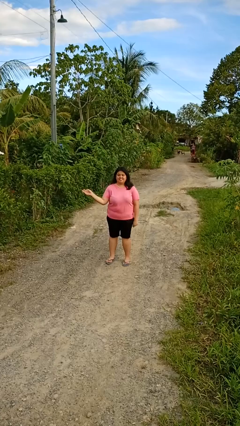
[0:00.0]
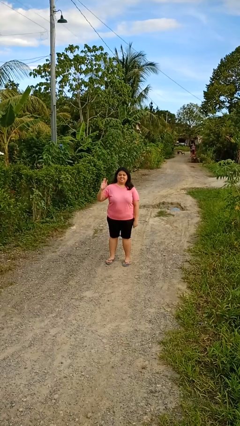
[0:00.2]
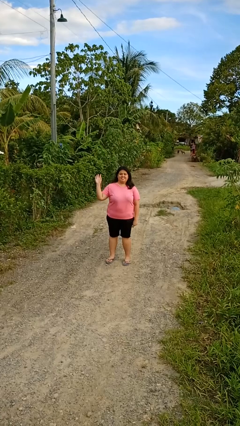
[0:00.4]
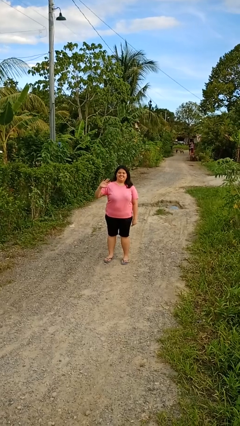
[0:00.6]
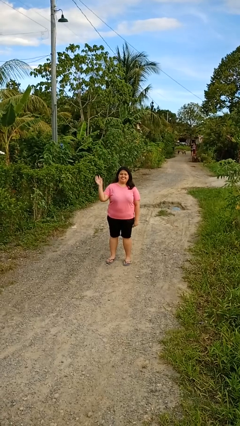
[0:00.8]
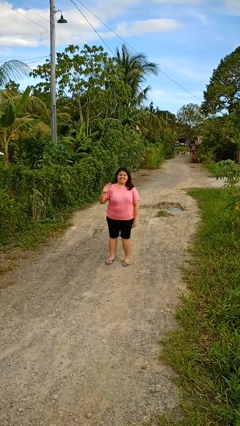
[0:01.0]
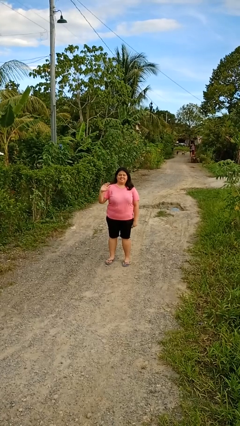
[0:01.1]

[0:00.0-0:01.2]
person waves at person

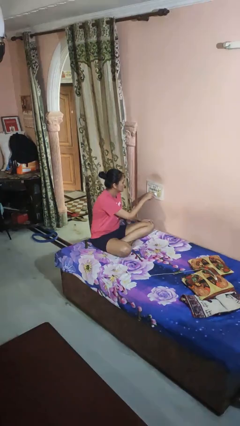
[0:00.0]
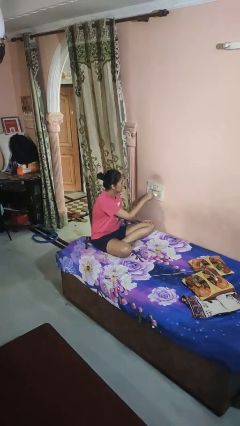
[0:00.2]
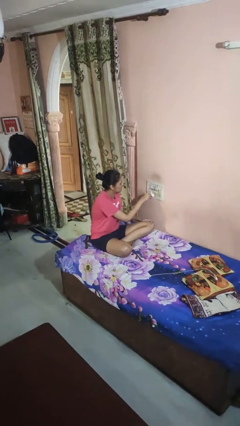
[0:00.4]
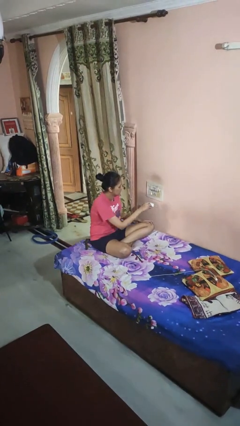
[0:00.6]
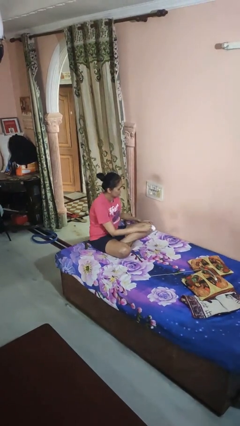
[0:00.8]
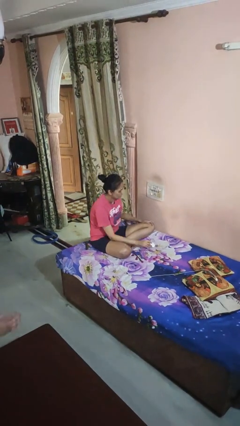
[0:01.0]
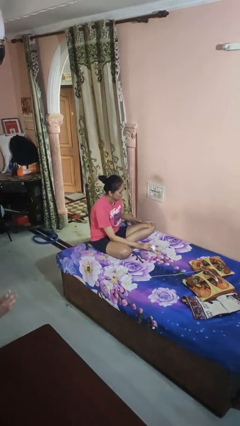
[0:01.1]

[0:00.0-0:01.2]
person unplugs from electrical socket

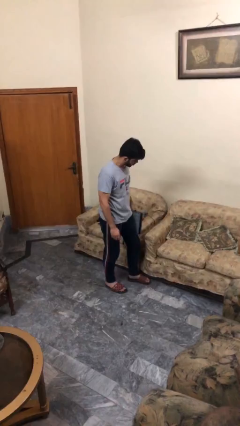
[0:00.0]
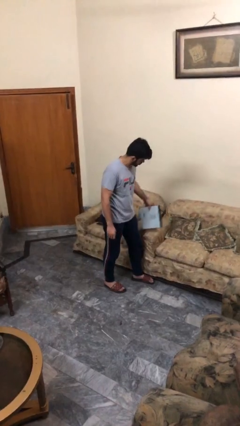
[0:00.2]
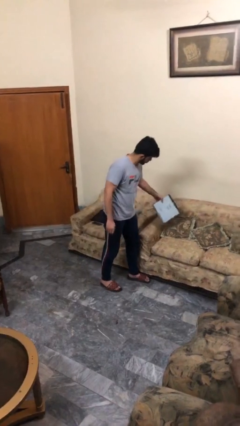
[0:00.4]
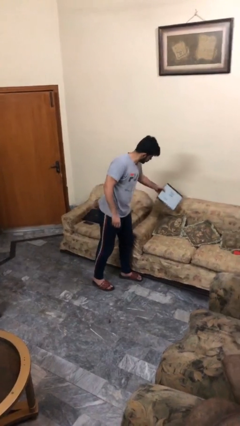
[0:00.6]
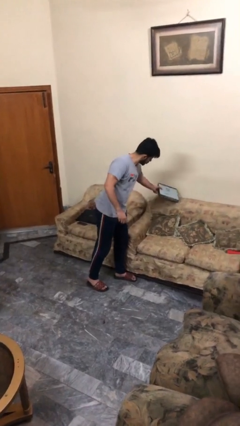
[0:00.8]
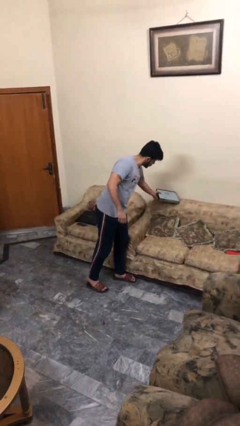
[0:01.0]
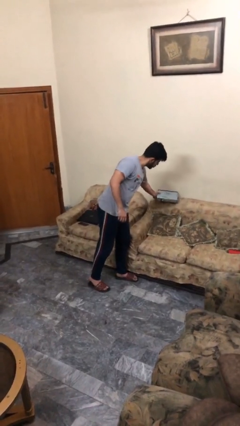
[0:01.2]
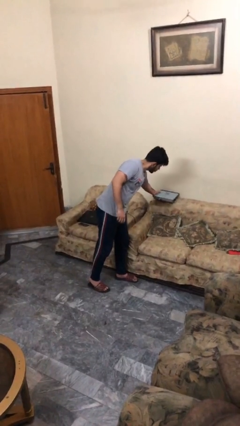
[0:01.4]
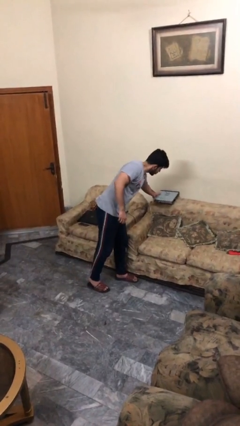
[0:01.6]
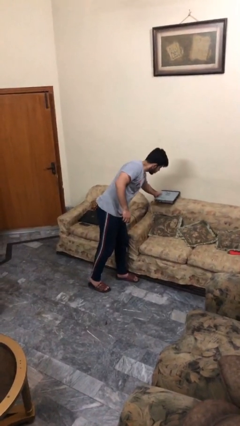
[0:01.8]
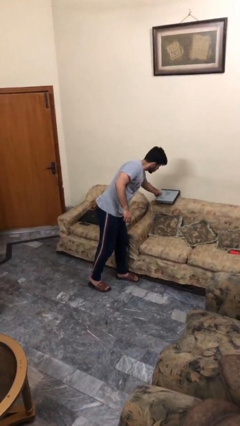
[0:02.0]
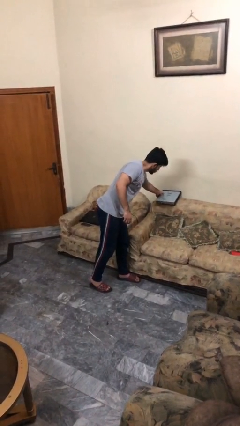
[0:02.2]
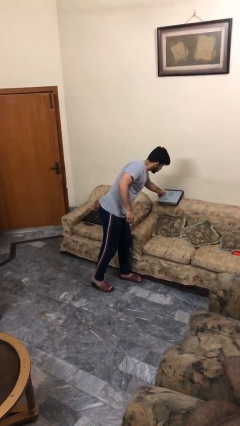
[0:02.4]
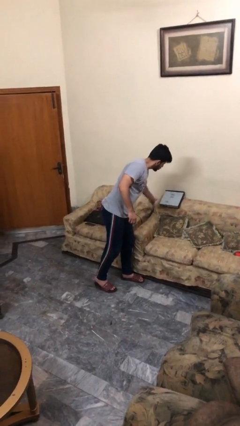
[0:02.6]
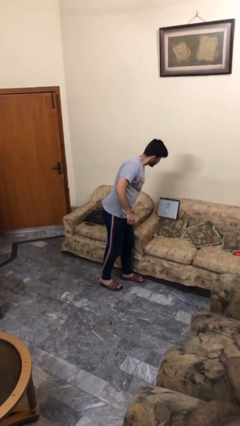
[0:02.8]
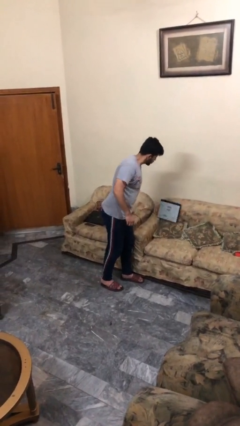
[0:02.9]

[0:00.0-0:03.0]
person puts down object on couch

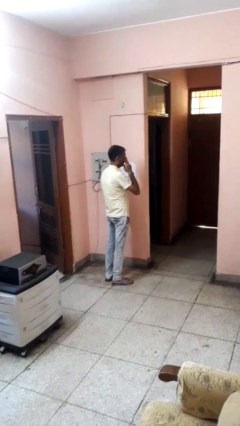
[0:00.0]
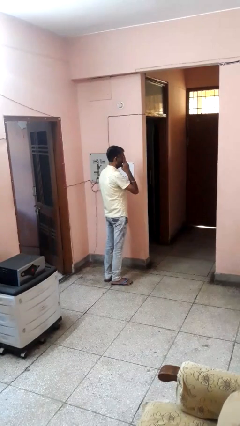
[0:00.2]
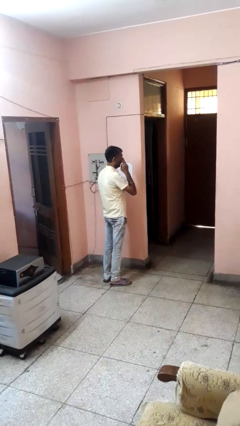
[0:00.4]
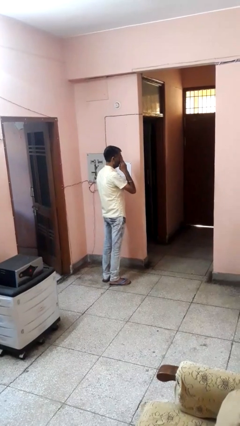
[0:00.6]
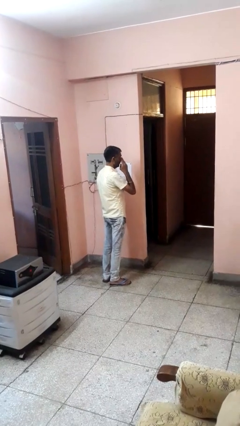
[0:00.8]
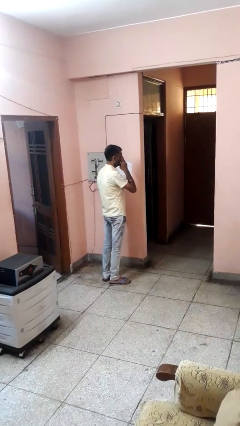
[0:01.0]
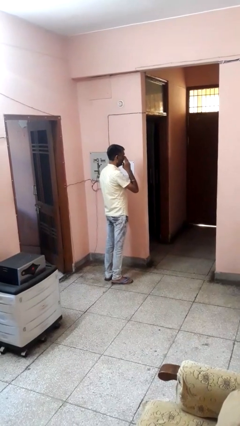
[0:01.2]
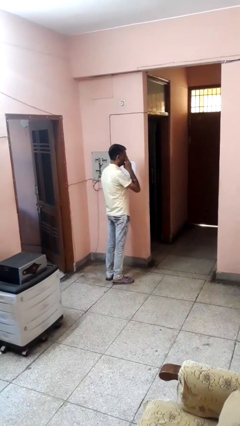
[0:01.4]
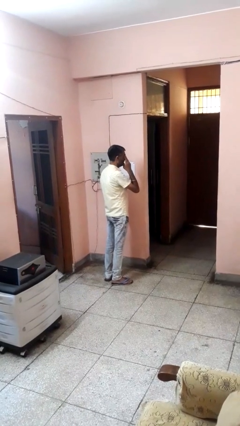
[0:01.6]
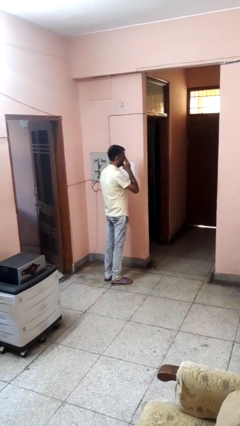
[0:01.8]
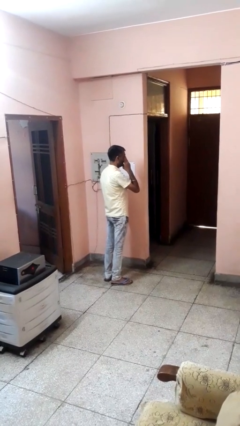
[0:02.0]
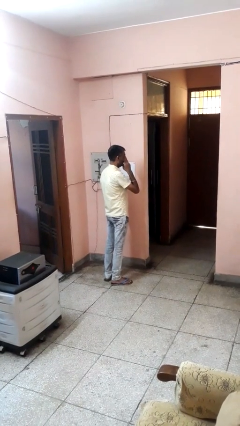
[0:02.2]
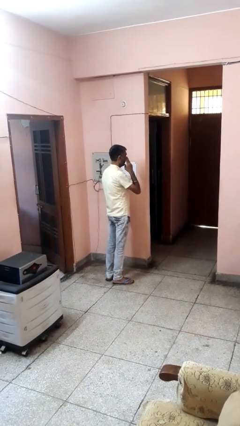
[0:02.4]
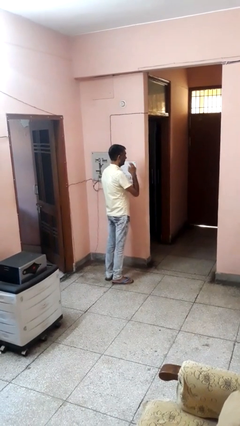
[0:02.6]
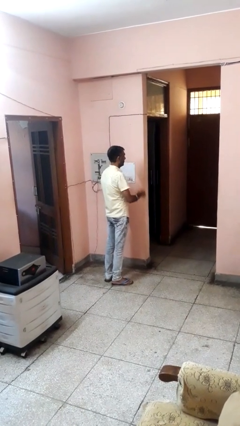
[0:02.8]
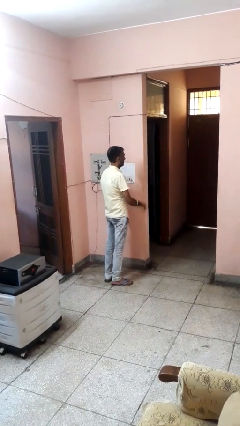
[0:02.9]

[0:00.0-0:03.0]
person scratches face

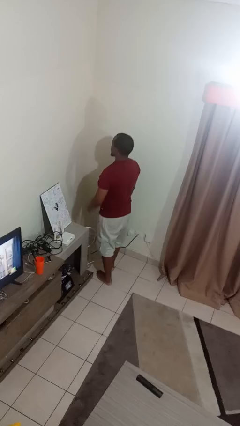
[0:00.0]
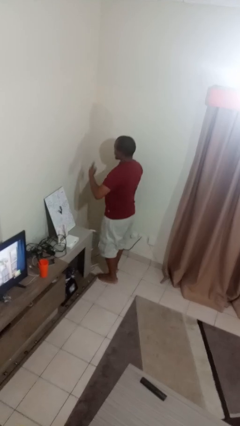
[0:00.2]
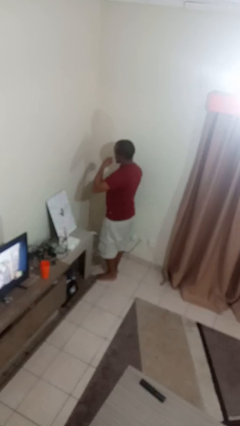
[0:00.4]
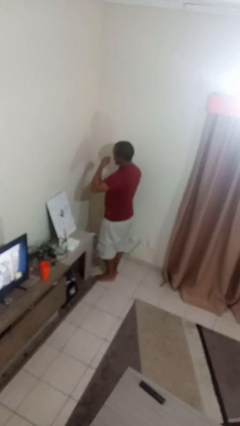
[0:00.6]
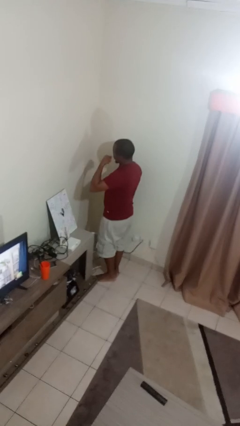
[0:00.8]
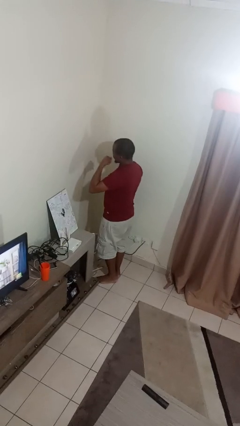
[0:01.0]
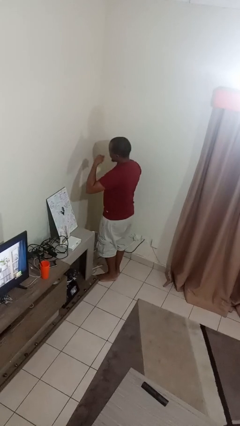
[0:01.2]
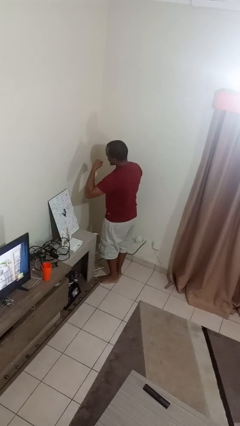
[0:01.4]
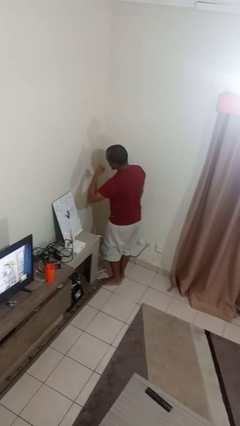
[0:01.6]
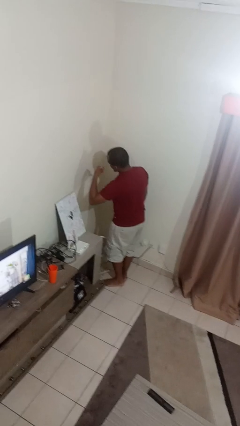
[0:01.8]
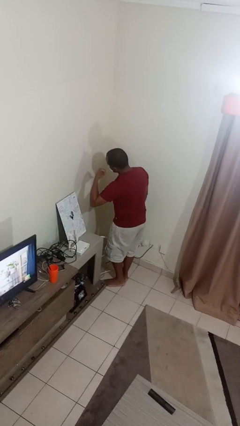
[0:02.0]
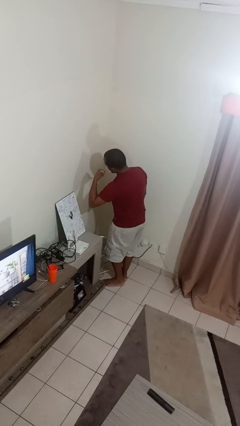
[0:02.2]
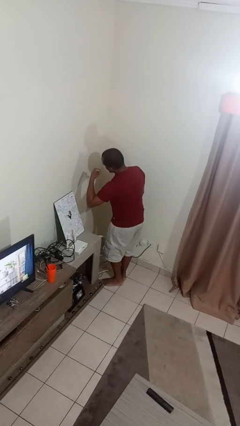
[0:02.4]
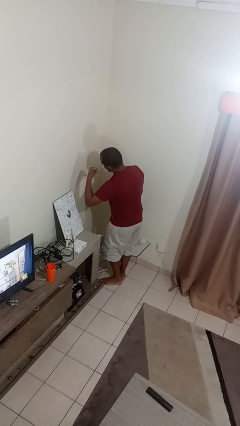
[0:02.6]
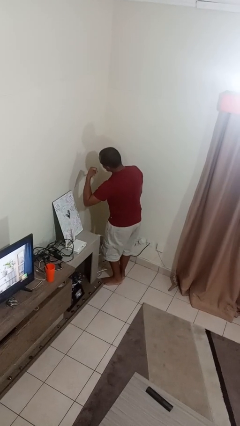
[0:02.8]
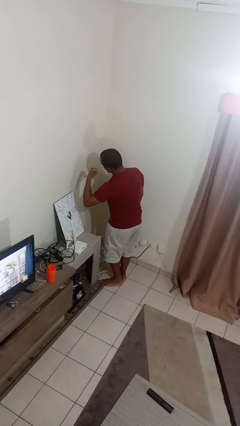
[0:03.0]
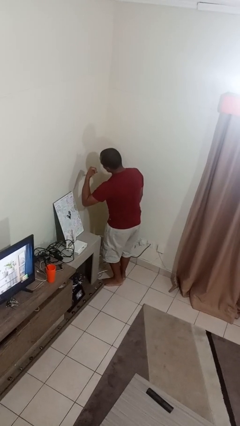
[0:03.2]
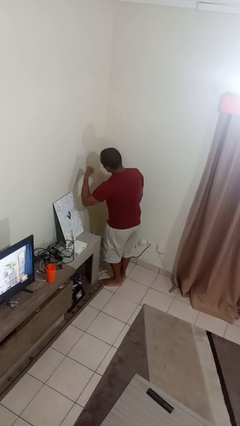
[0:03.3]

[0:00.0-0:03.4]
person gestures call me

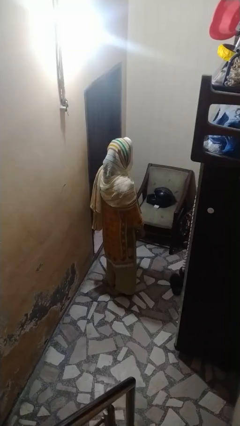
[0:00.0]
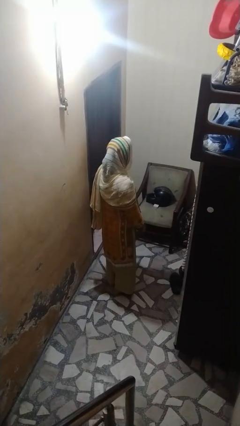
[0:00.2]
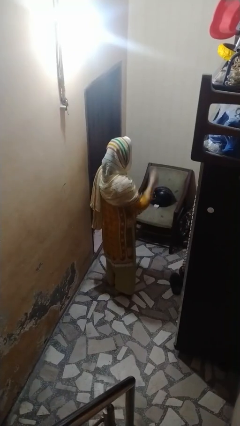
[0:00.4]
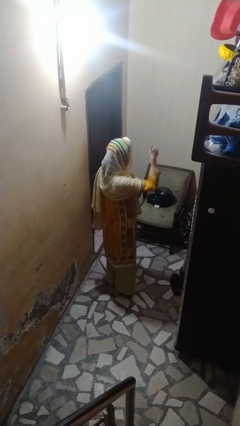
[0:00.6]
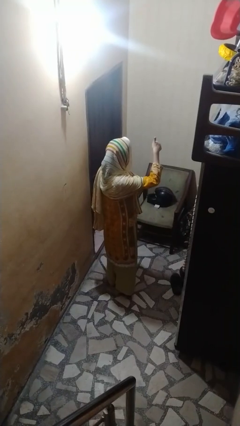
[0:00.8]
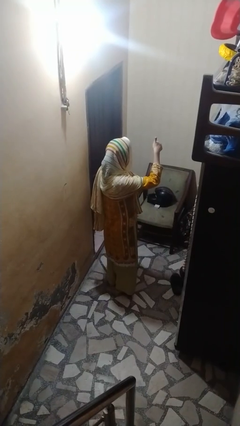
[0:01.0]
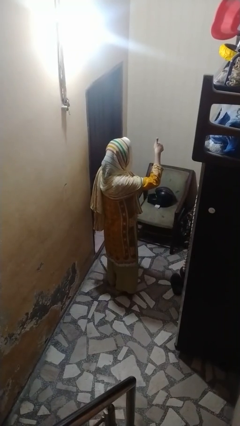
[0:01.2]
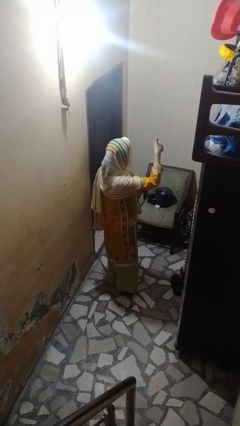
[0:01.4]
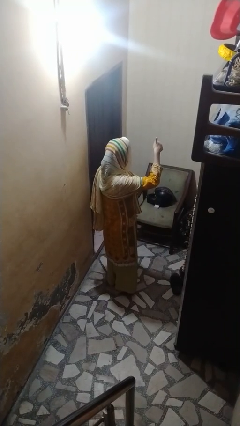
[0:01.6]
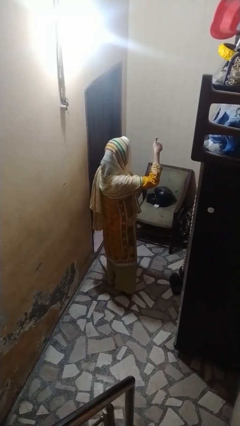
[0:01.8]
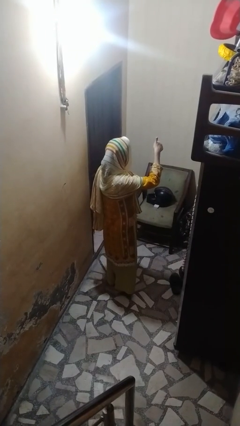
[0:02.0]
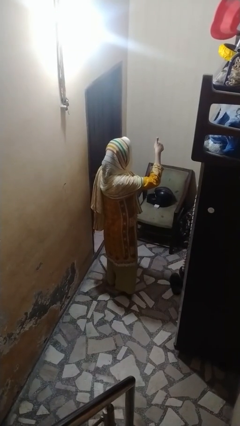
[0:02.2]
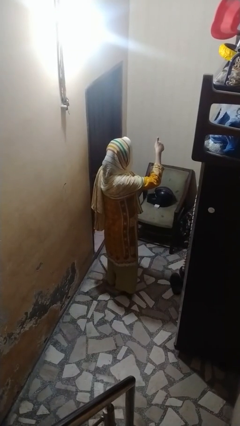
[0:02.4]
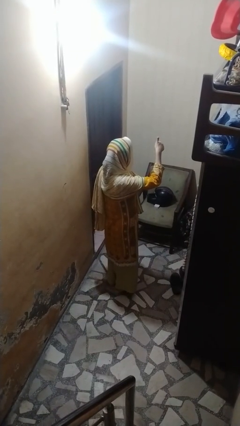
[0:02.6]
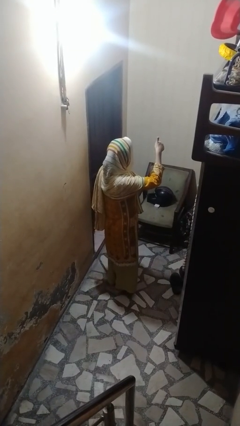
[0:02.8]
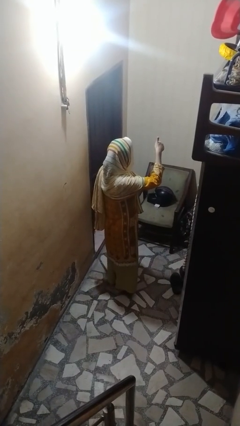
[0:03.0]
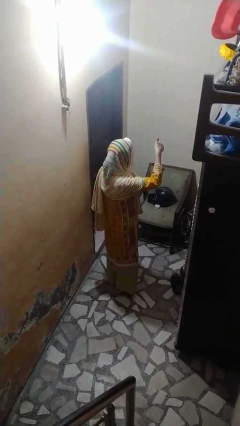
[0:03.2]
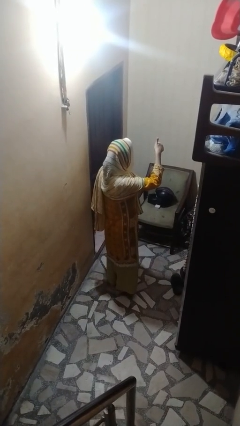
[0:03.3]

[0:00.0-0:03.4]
person gestures thumbs up

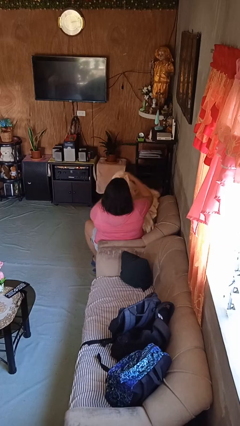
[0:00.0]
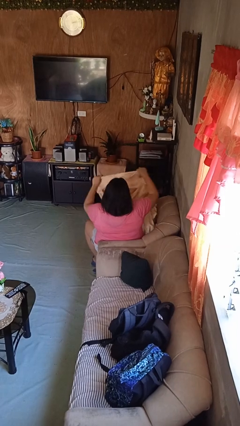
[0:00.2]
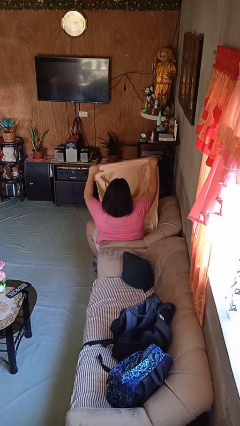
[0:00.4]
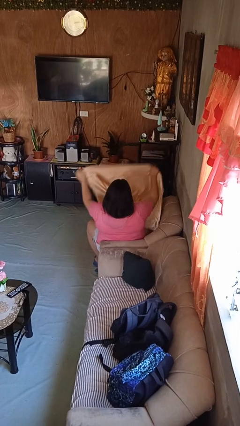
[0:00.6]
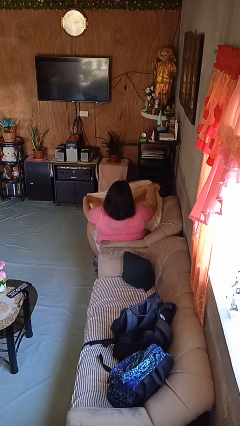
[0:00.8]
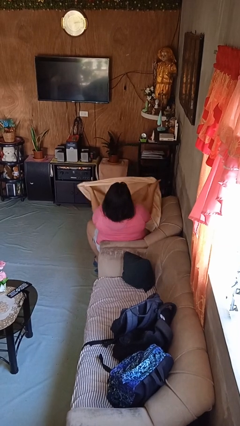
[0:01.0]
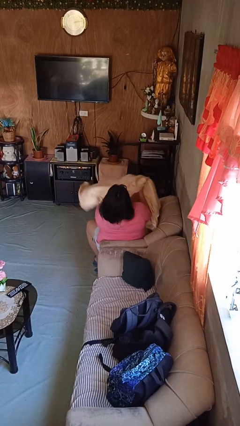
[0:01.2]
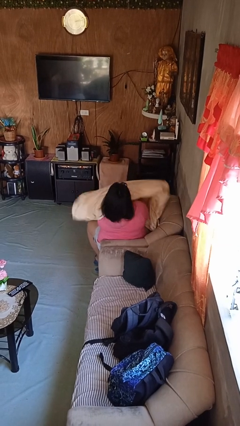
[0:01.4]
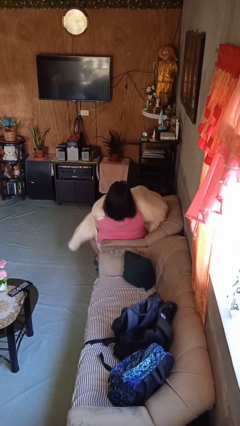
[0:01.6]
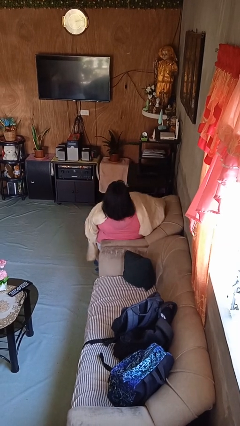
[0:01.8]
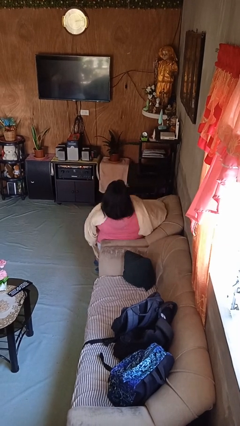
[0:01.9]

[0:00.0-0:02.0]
person covers with blanket
